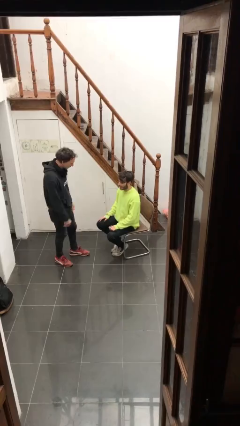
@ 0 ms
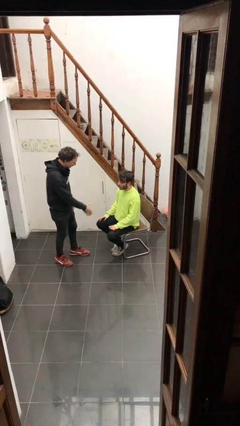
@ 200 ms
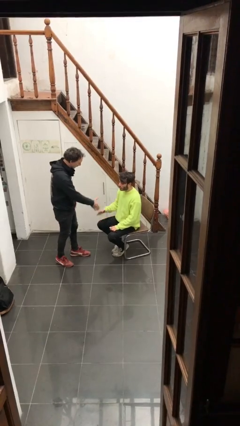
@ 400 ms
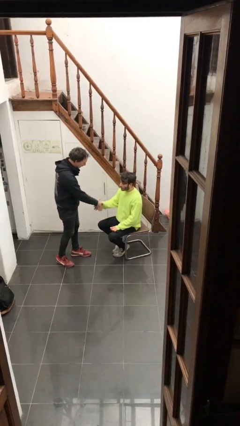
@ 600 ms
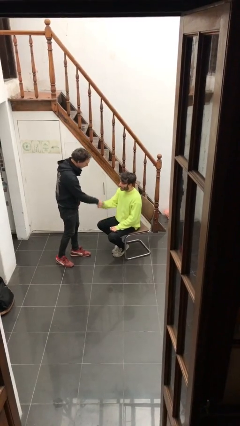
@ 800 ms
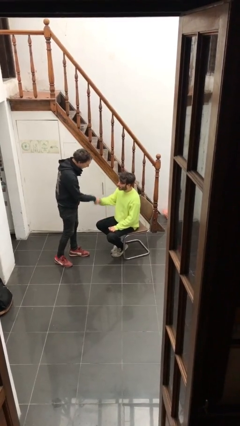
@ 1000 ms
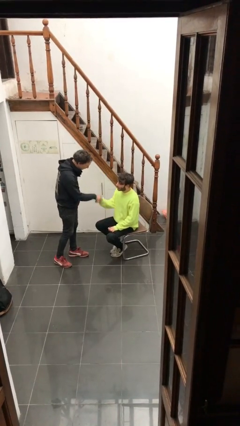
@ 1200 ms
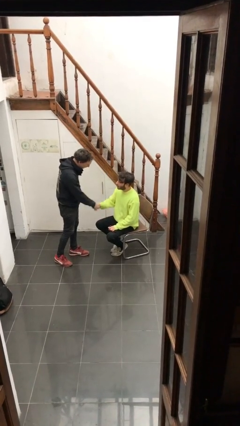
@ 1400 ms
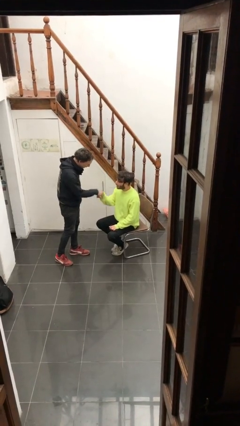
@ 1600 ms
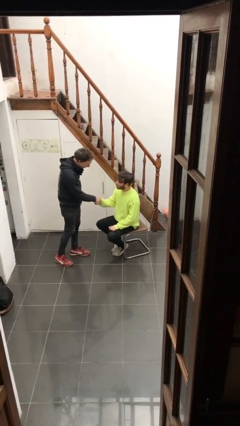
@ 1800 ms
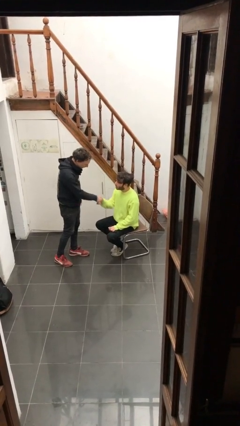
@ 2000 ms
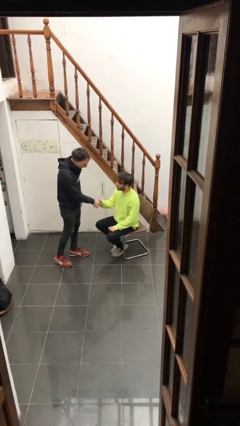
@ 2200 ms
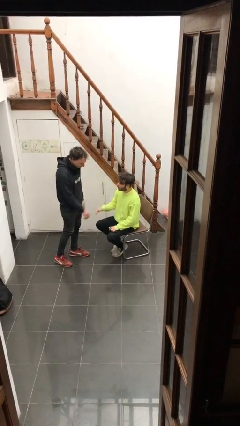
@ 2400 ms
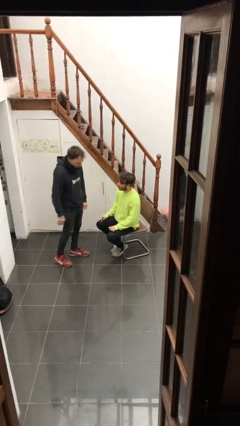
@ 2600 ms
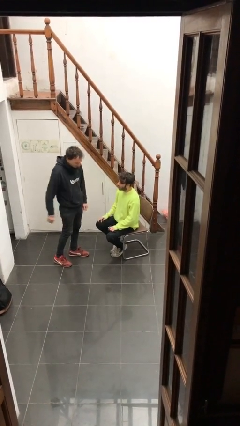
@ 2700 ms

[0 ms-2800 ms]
person shakes hand

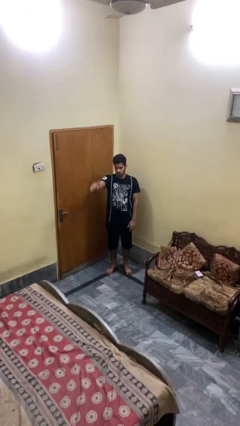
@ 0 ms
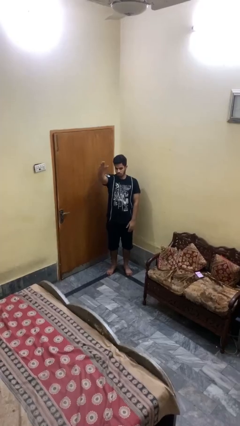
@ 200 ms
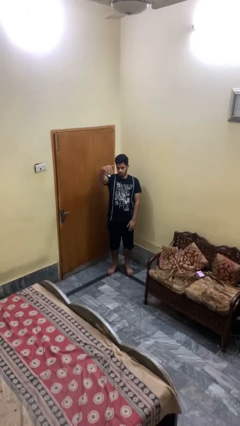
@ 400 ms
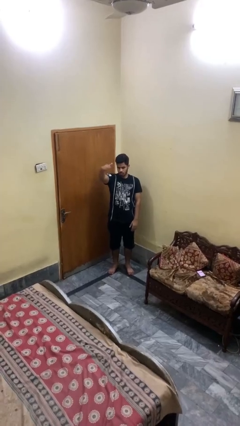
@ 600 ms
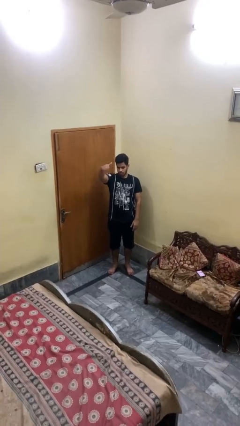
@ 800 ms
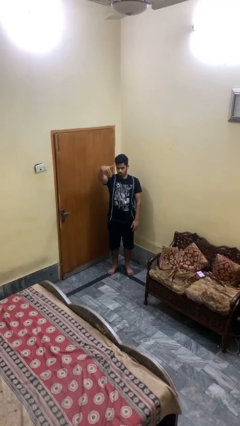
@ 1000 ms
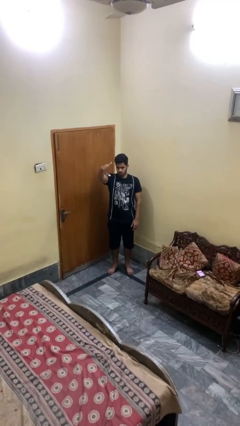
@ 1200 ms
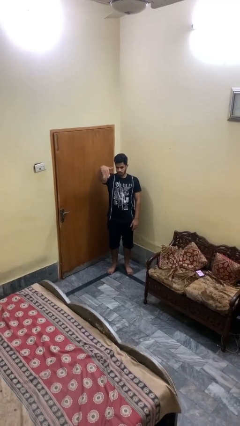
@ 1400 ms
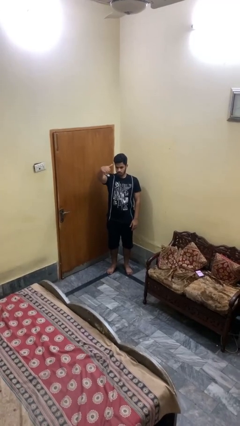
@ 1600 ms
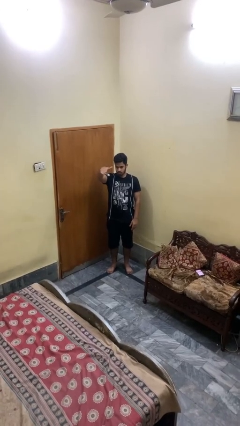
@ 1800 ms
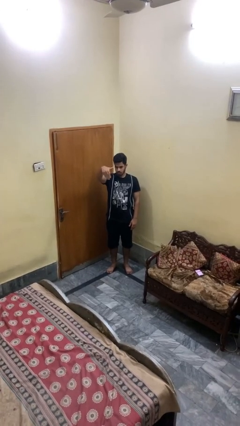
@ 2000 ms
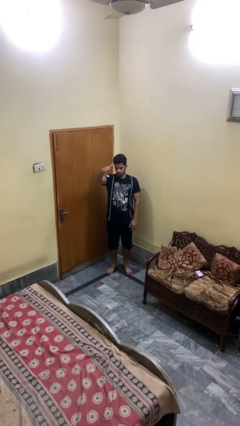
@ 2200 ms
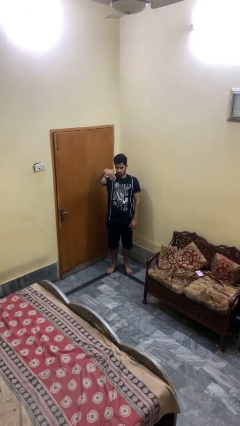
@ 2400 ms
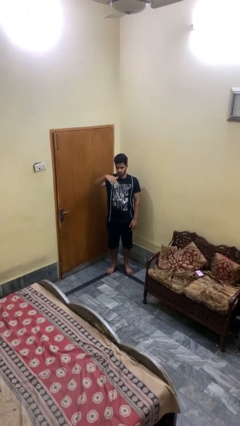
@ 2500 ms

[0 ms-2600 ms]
person gestures come here

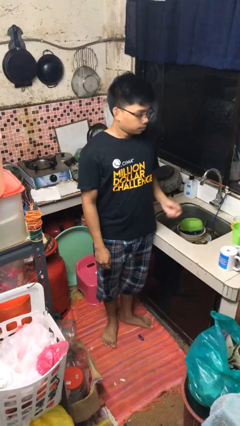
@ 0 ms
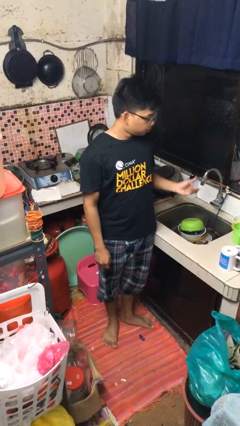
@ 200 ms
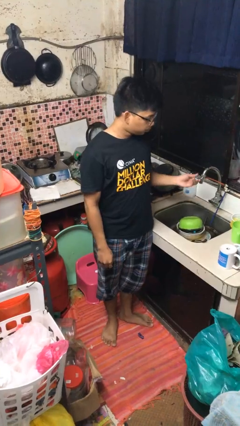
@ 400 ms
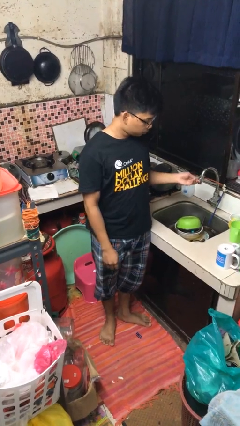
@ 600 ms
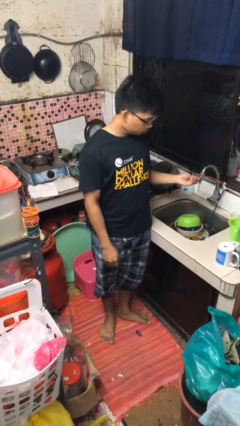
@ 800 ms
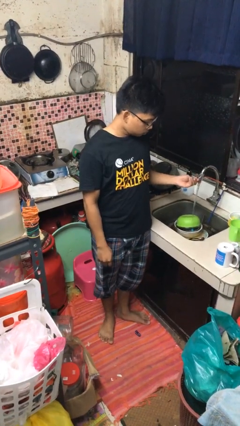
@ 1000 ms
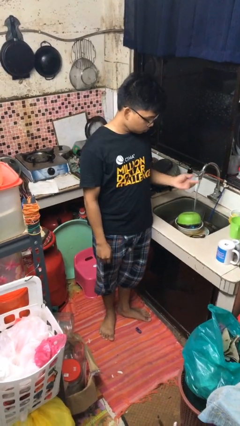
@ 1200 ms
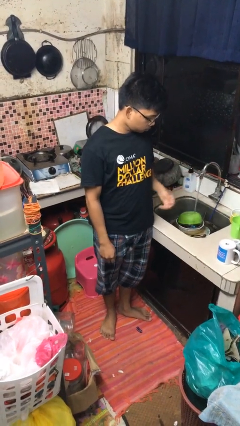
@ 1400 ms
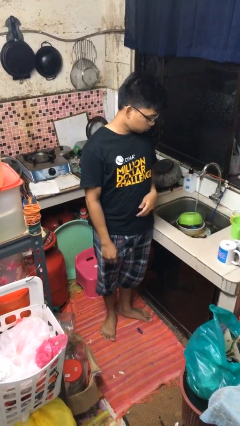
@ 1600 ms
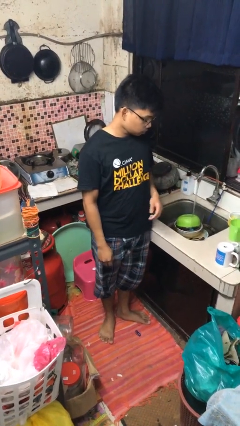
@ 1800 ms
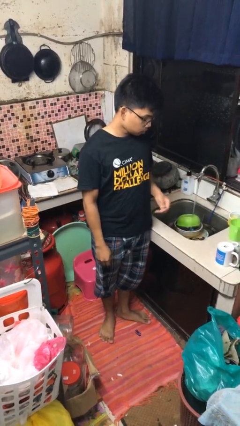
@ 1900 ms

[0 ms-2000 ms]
person turns on faucet

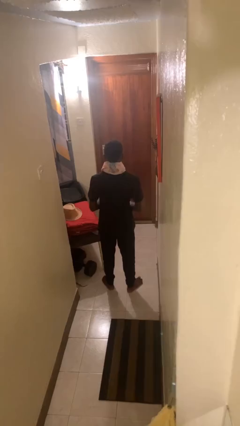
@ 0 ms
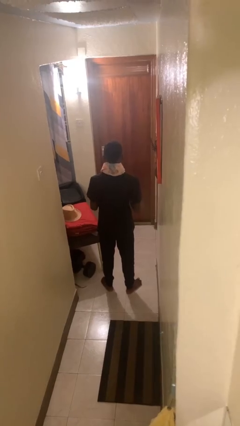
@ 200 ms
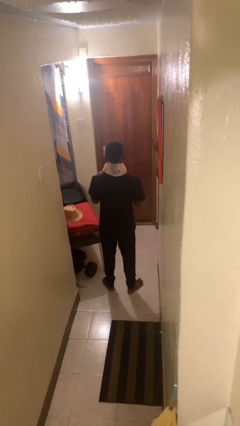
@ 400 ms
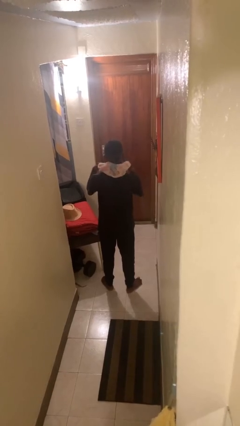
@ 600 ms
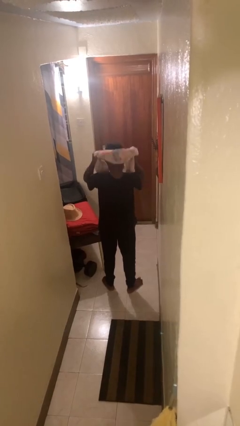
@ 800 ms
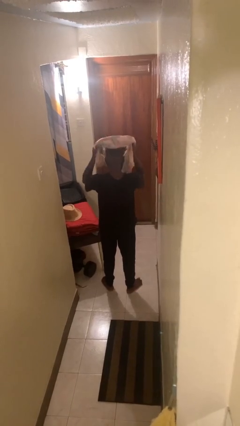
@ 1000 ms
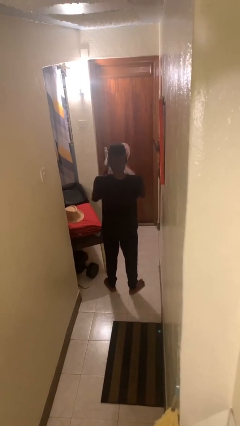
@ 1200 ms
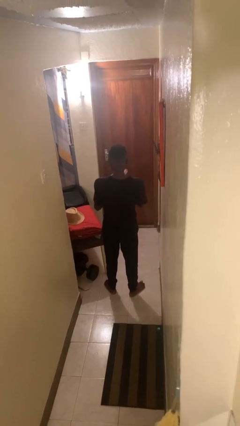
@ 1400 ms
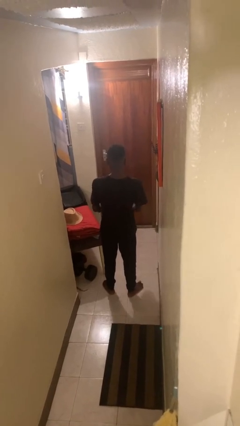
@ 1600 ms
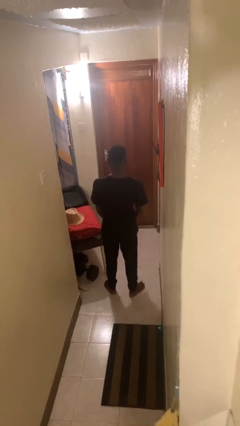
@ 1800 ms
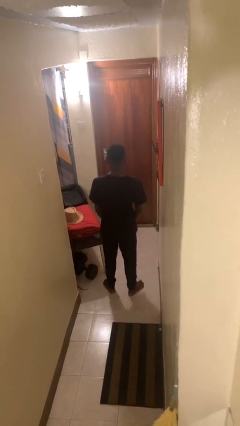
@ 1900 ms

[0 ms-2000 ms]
person takes off scarf

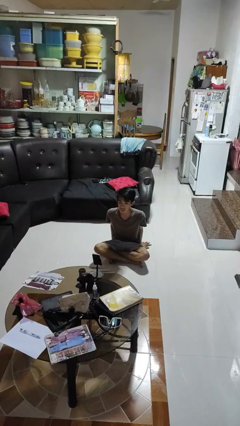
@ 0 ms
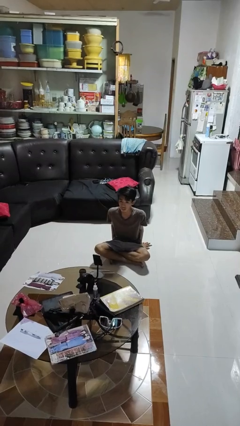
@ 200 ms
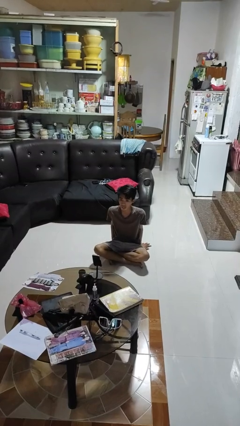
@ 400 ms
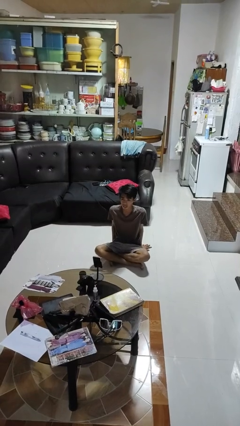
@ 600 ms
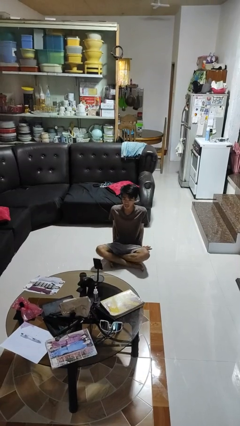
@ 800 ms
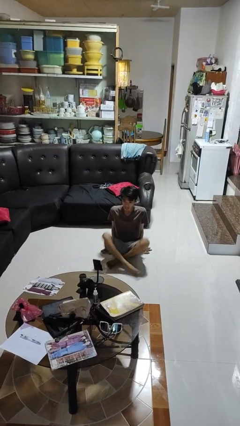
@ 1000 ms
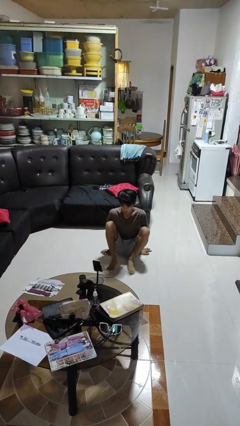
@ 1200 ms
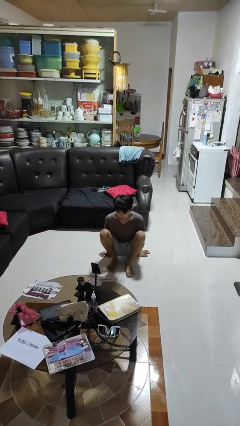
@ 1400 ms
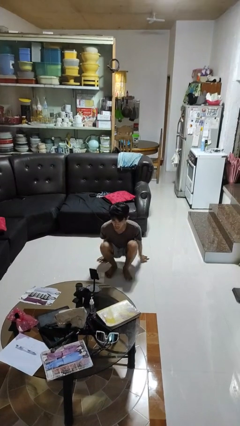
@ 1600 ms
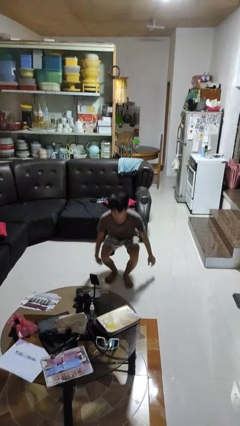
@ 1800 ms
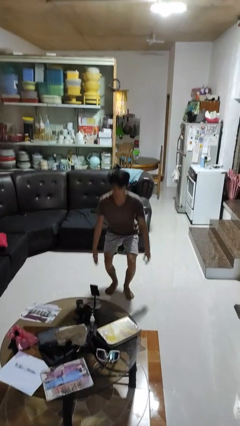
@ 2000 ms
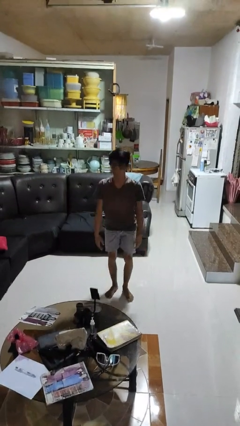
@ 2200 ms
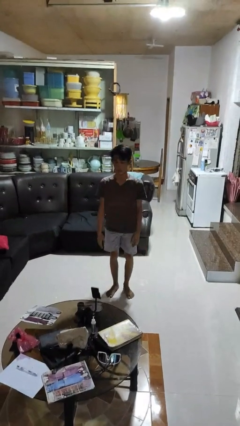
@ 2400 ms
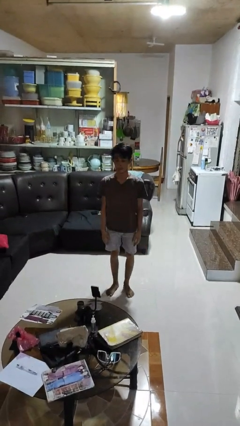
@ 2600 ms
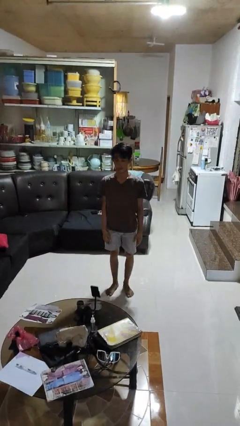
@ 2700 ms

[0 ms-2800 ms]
person stands up from floor

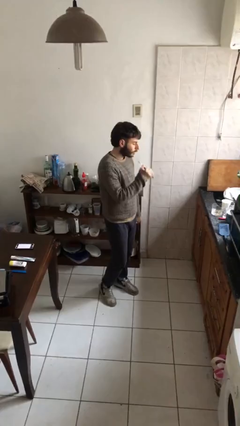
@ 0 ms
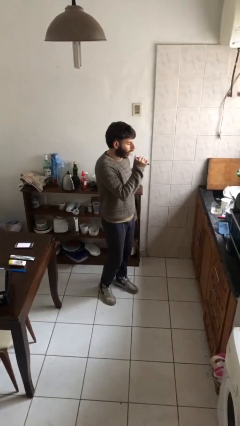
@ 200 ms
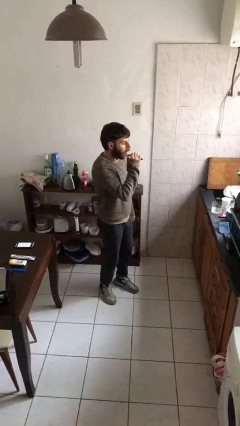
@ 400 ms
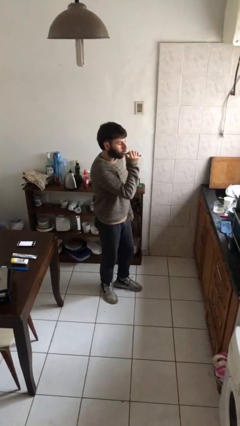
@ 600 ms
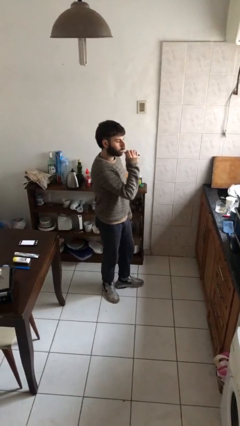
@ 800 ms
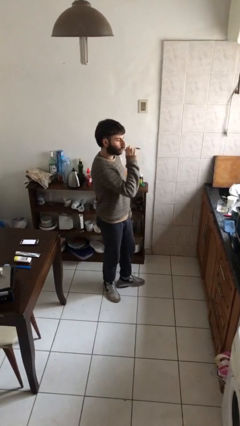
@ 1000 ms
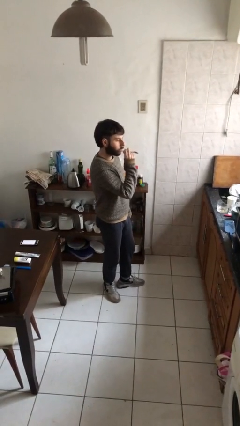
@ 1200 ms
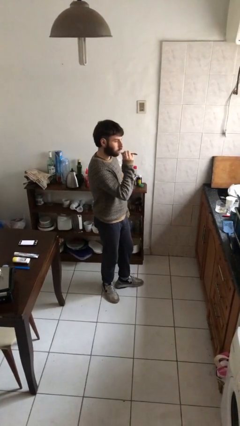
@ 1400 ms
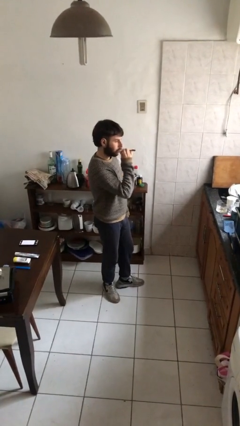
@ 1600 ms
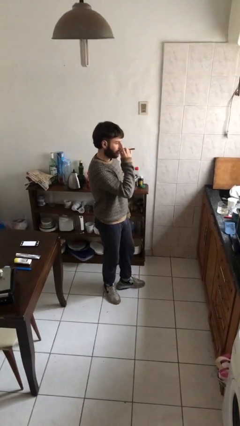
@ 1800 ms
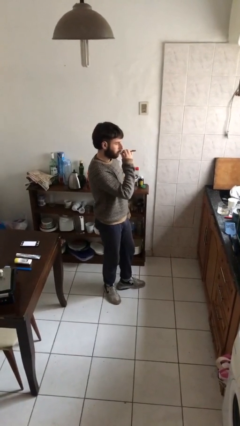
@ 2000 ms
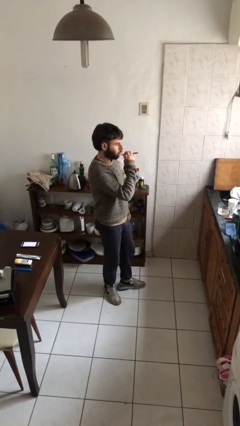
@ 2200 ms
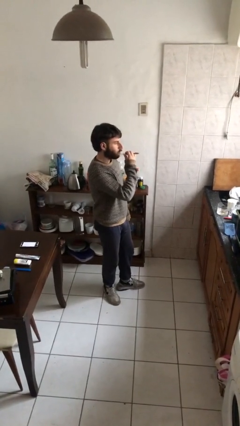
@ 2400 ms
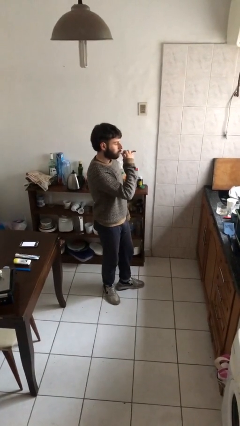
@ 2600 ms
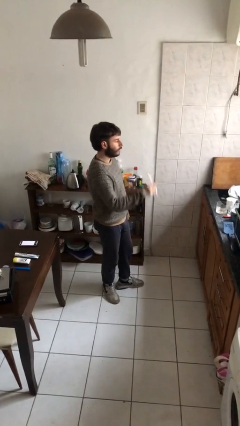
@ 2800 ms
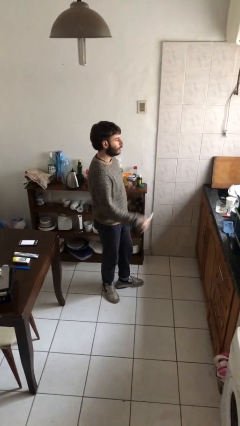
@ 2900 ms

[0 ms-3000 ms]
person brushes teeth

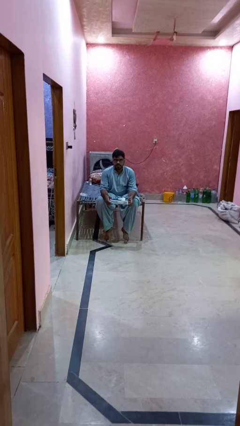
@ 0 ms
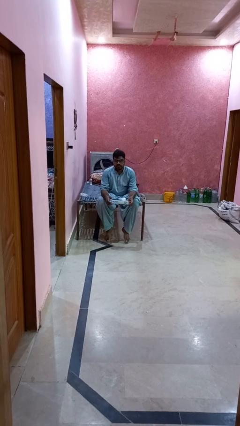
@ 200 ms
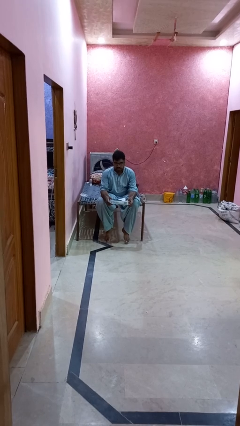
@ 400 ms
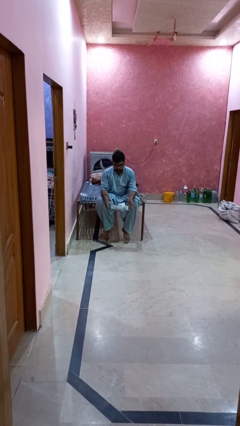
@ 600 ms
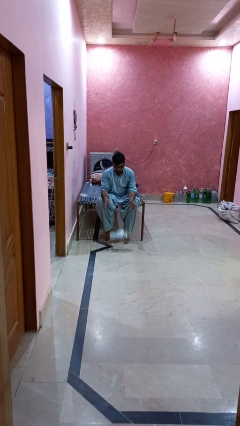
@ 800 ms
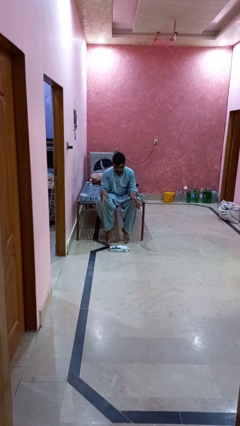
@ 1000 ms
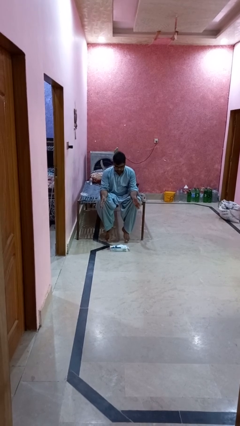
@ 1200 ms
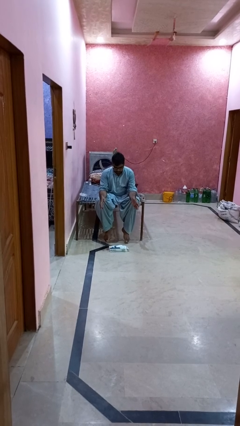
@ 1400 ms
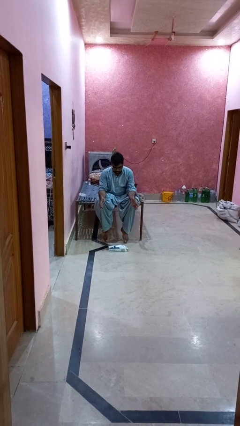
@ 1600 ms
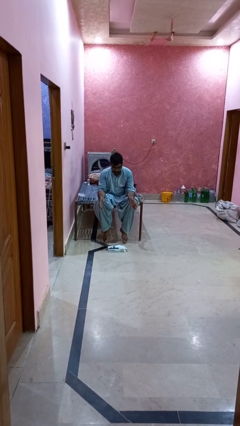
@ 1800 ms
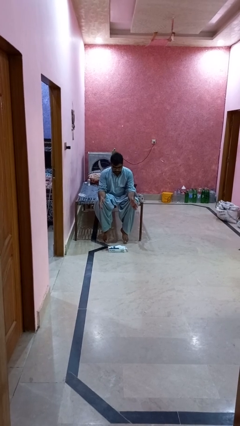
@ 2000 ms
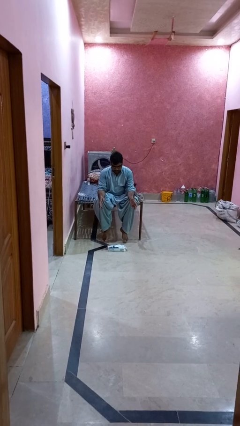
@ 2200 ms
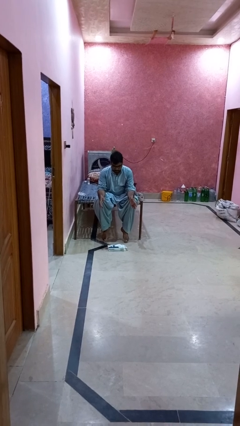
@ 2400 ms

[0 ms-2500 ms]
person drops object
